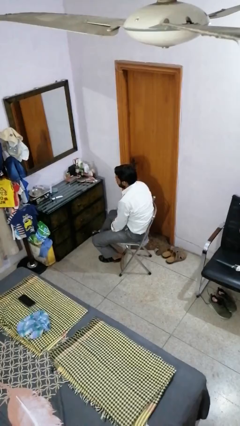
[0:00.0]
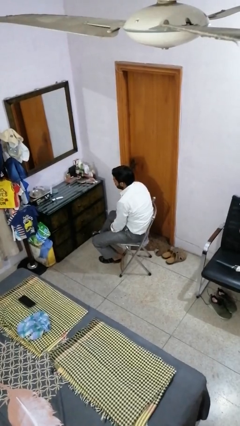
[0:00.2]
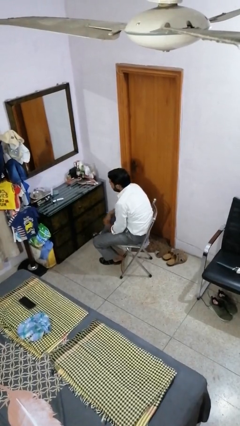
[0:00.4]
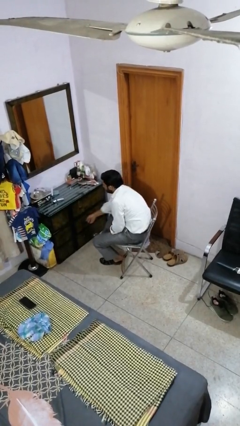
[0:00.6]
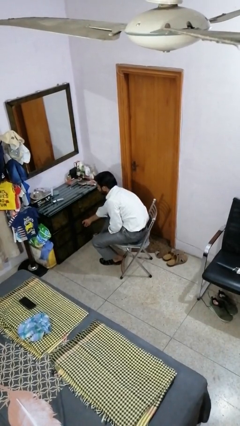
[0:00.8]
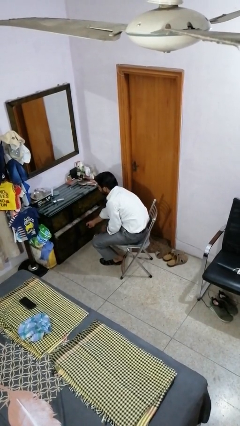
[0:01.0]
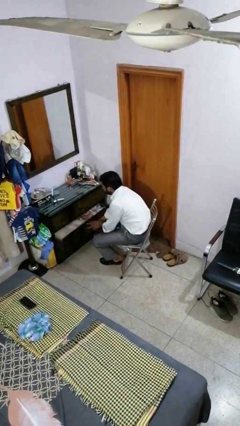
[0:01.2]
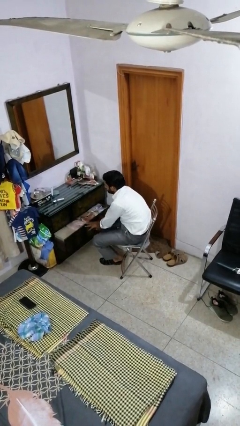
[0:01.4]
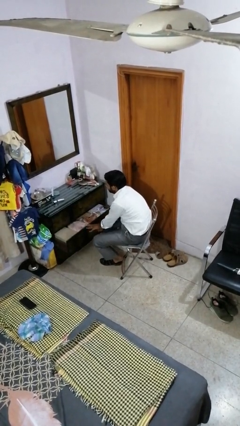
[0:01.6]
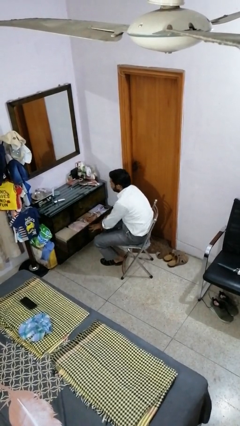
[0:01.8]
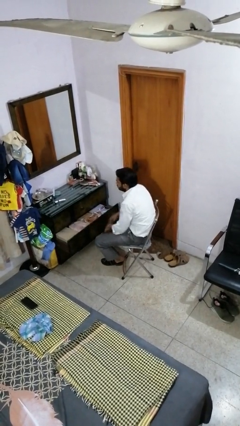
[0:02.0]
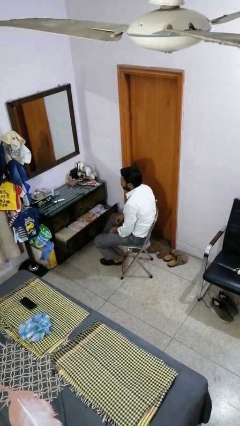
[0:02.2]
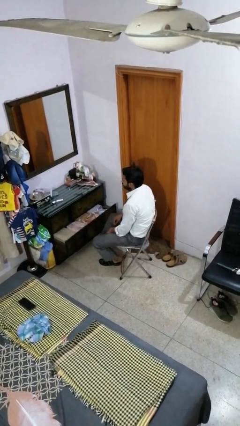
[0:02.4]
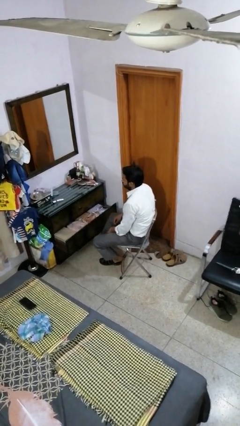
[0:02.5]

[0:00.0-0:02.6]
person opens dresser drawer

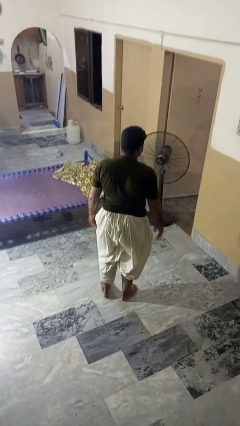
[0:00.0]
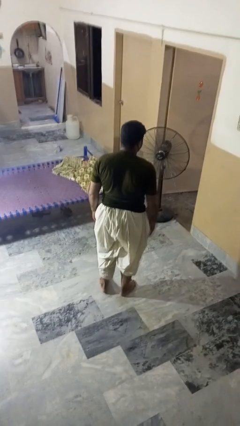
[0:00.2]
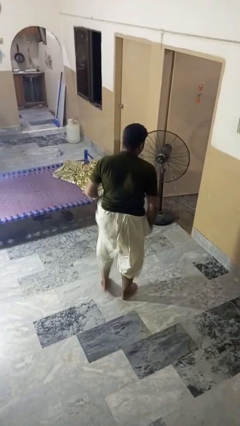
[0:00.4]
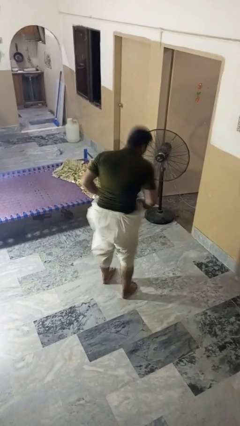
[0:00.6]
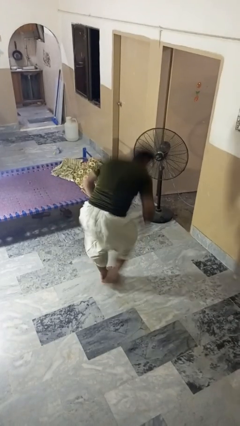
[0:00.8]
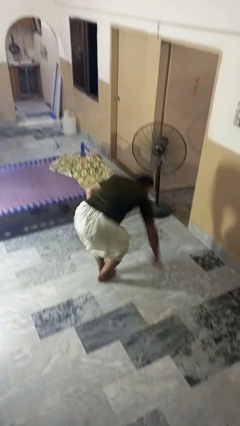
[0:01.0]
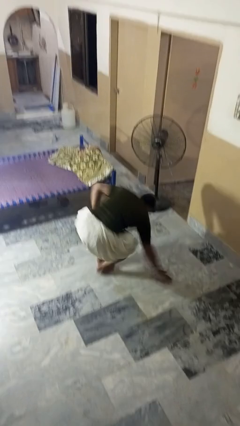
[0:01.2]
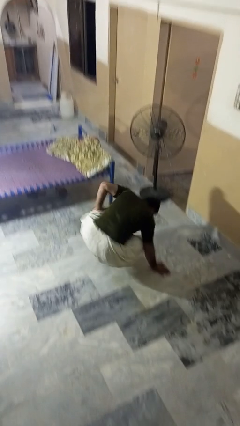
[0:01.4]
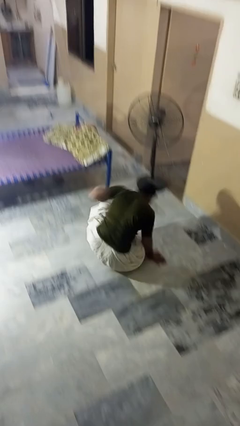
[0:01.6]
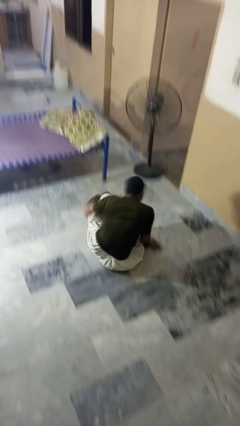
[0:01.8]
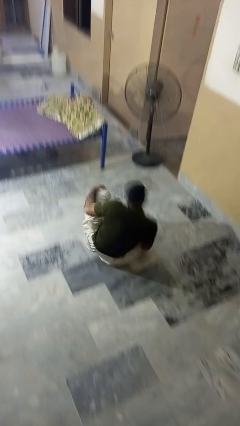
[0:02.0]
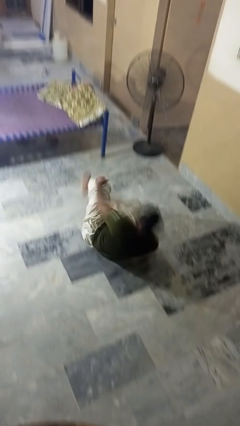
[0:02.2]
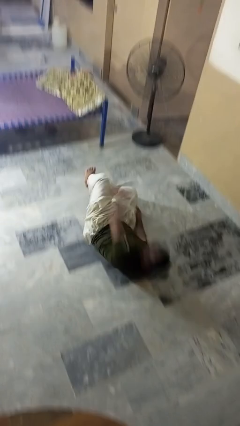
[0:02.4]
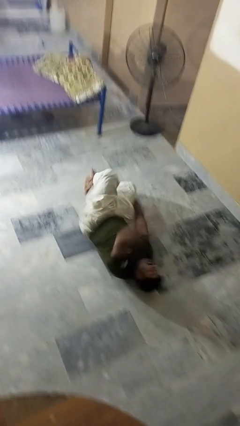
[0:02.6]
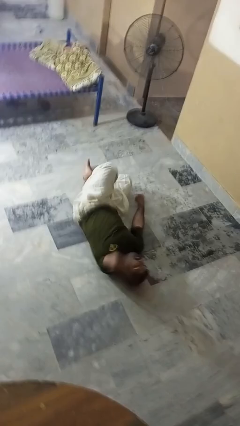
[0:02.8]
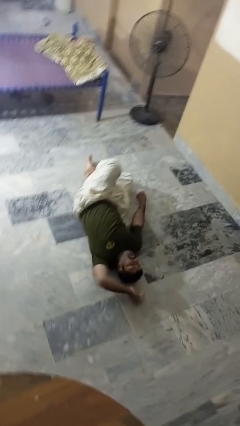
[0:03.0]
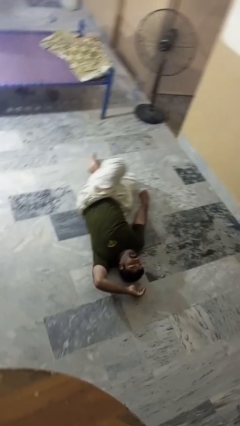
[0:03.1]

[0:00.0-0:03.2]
person falls while standing

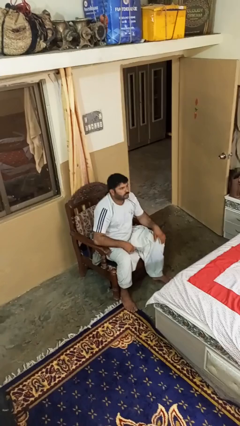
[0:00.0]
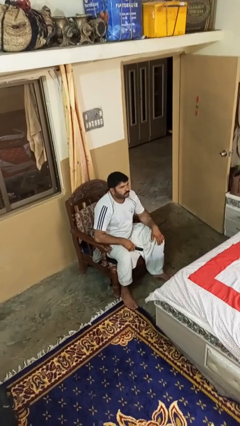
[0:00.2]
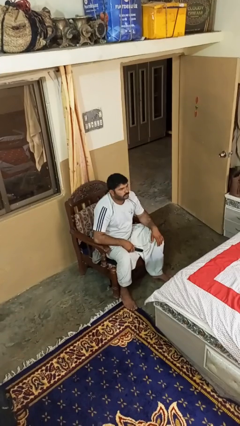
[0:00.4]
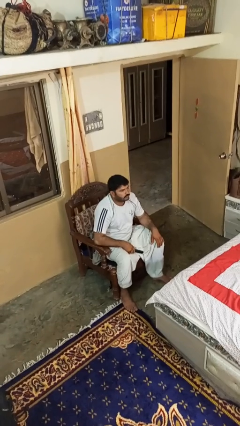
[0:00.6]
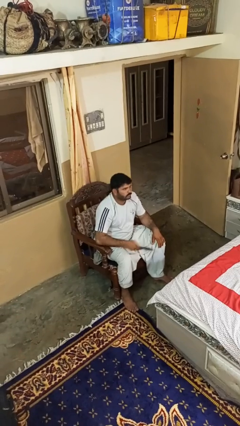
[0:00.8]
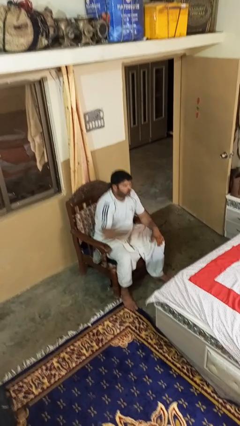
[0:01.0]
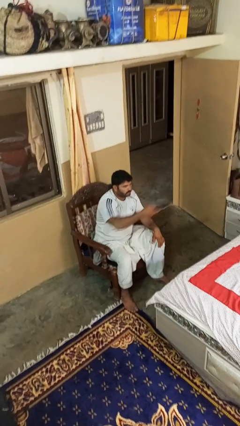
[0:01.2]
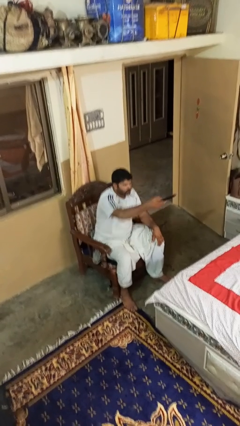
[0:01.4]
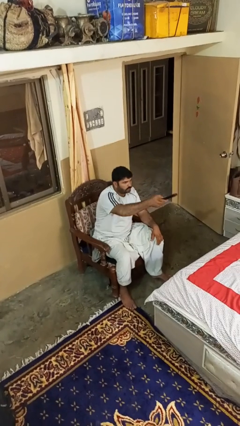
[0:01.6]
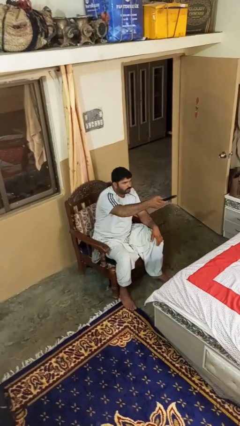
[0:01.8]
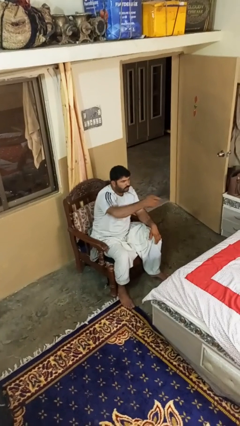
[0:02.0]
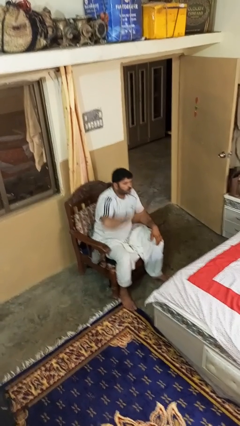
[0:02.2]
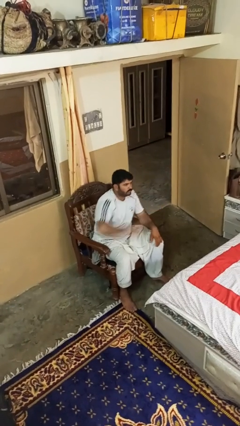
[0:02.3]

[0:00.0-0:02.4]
person uses television remote

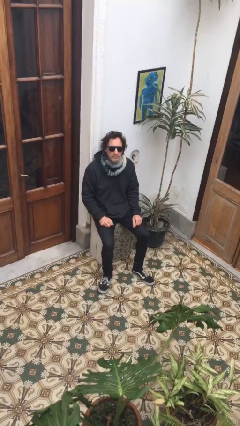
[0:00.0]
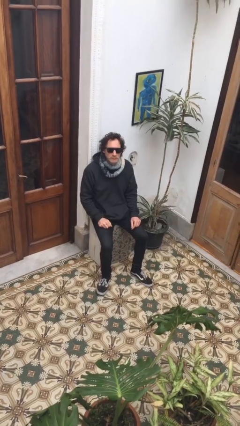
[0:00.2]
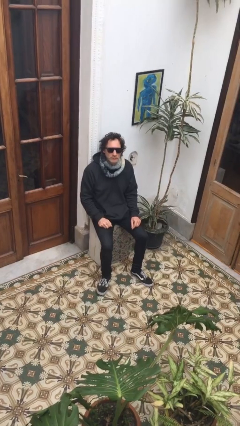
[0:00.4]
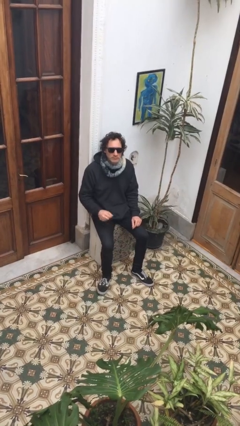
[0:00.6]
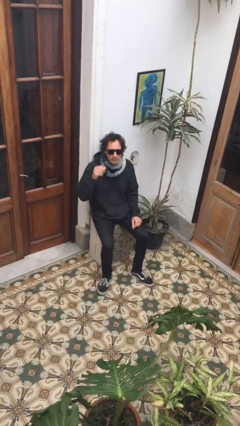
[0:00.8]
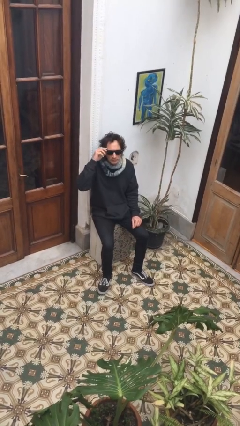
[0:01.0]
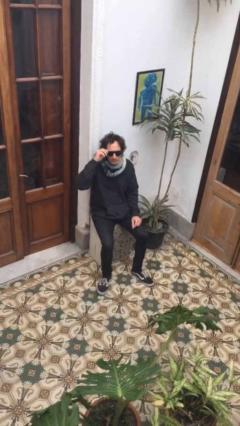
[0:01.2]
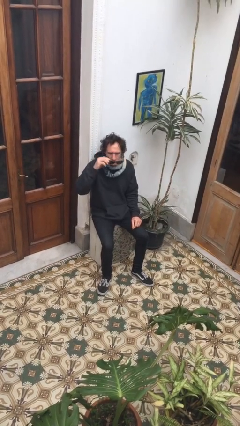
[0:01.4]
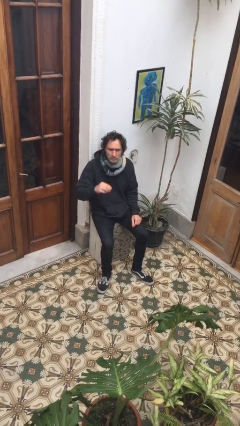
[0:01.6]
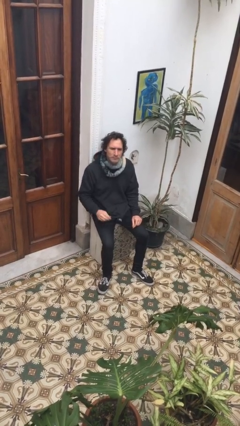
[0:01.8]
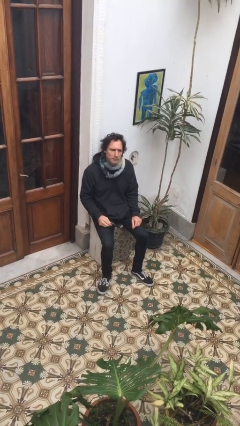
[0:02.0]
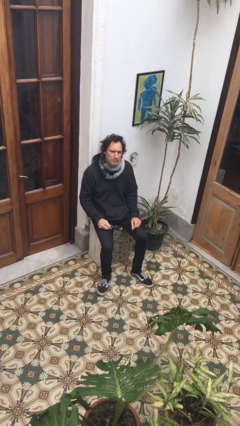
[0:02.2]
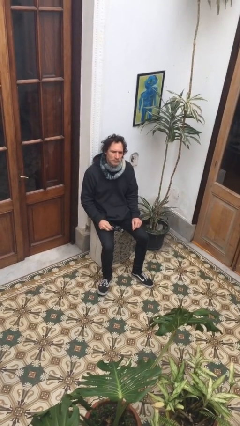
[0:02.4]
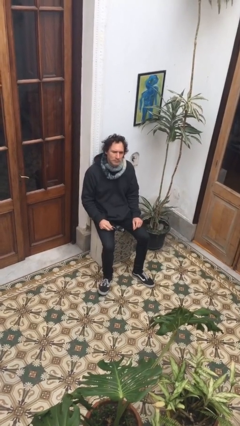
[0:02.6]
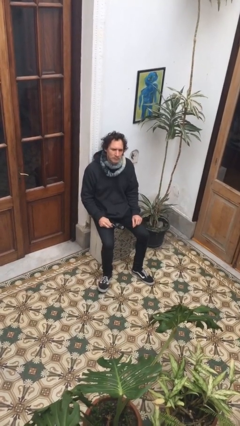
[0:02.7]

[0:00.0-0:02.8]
person takes off sunglasses

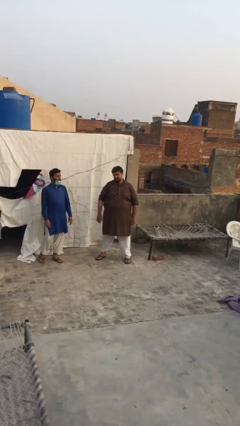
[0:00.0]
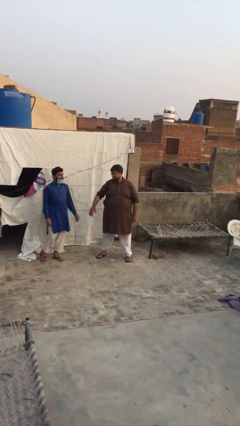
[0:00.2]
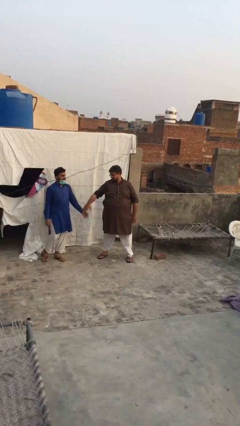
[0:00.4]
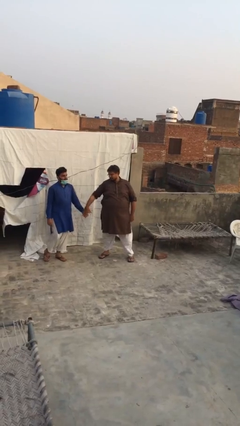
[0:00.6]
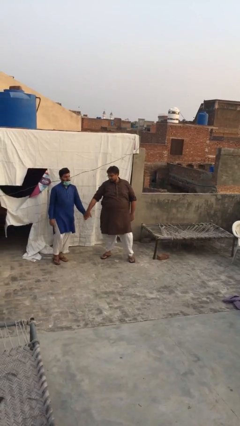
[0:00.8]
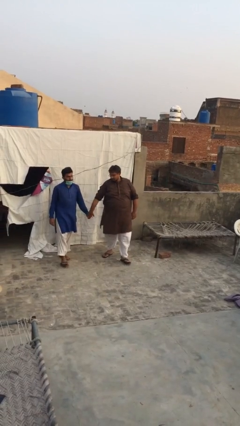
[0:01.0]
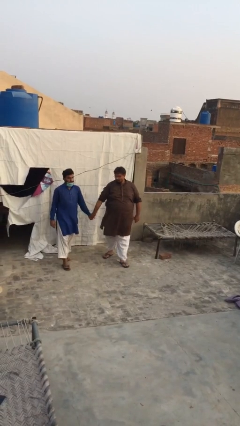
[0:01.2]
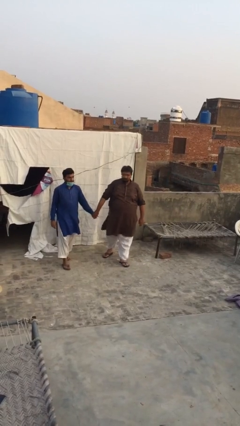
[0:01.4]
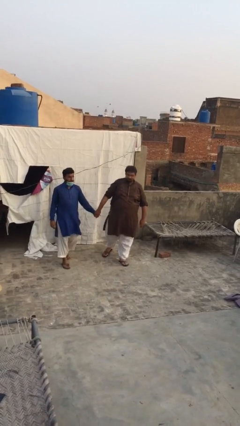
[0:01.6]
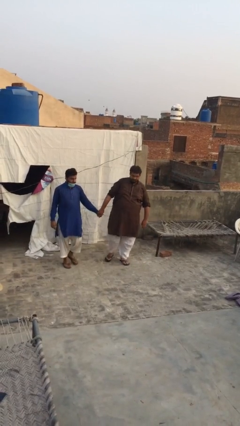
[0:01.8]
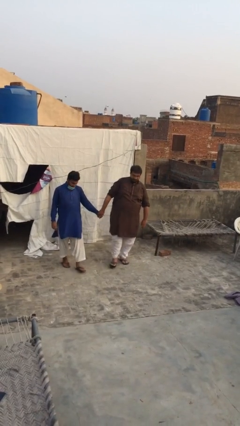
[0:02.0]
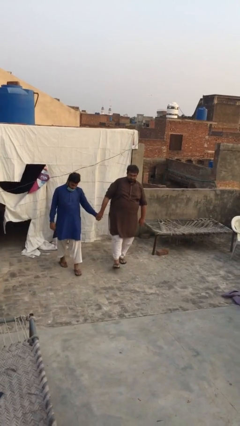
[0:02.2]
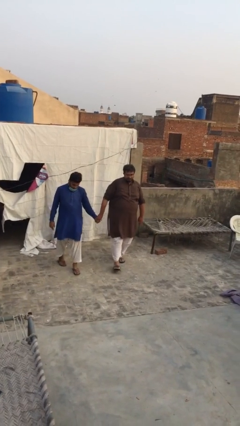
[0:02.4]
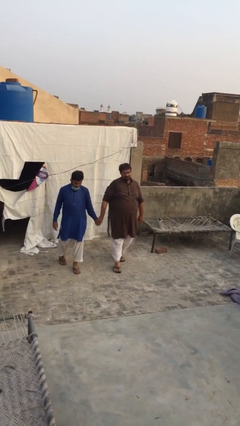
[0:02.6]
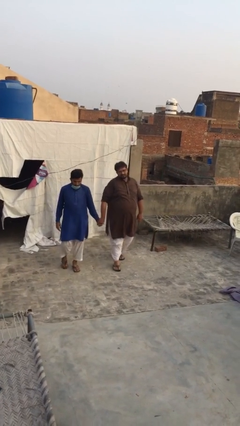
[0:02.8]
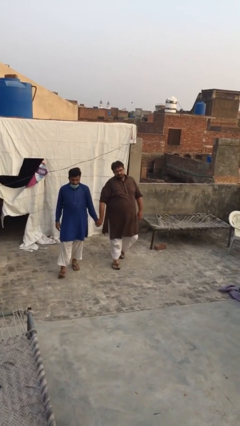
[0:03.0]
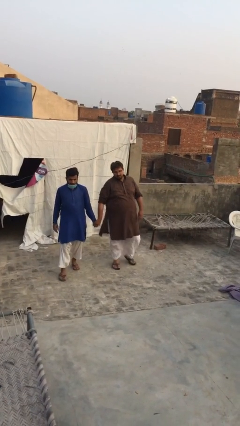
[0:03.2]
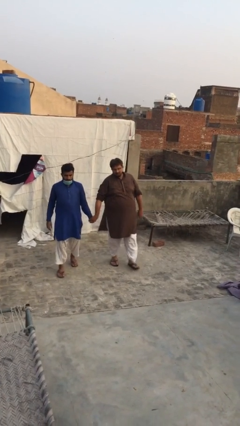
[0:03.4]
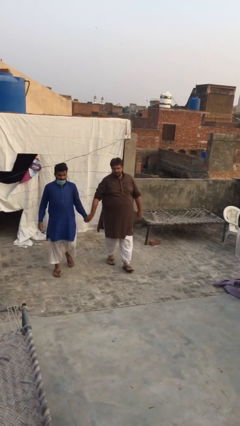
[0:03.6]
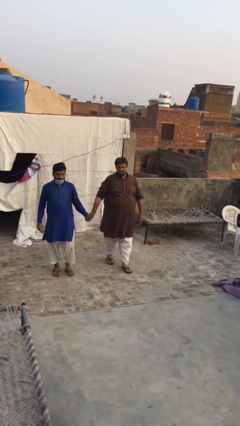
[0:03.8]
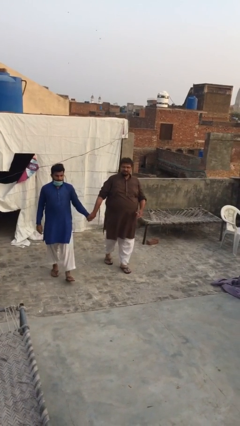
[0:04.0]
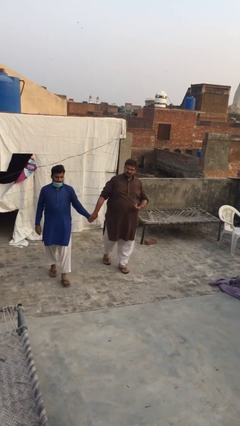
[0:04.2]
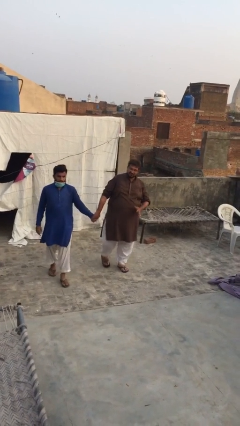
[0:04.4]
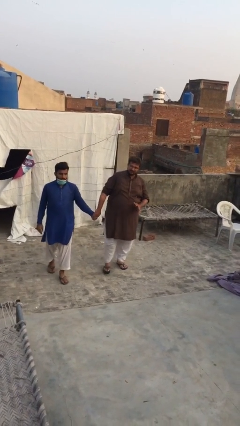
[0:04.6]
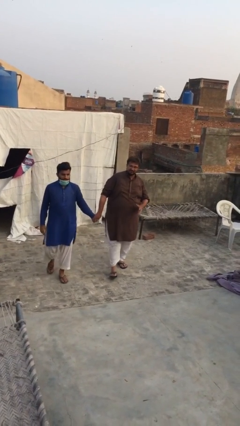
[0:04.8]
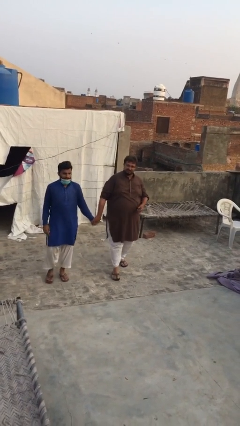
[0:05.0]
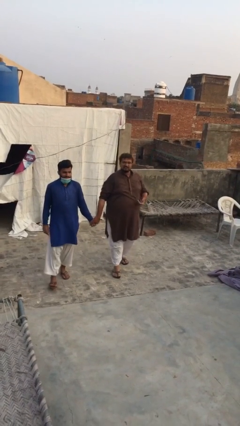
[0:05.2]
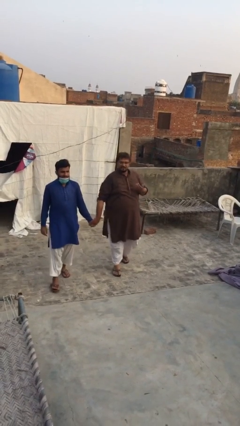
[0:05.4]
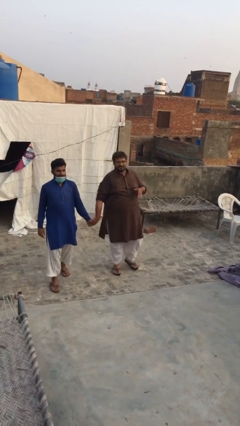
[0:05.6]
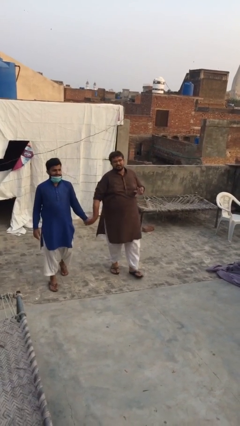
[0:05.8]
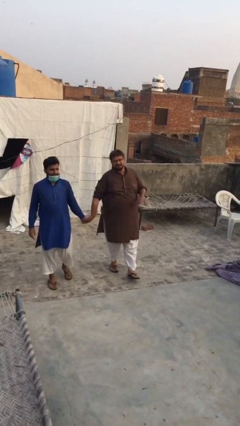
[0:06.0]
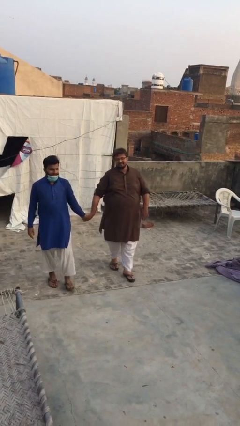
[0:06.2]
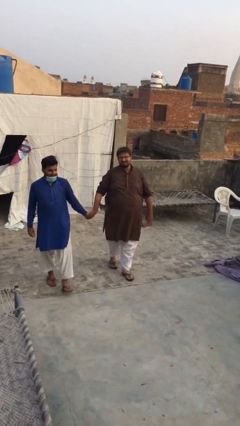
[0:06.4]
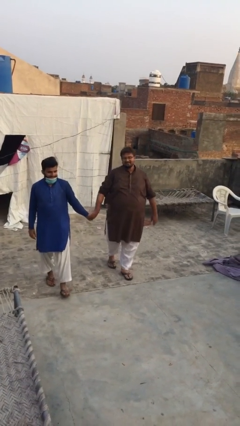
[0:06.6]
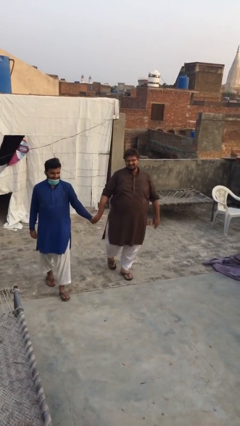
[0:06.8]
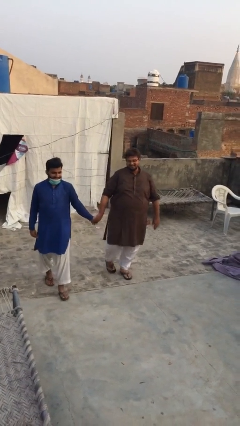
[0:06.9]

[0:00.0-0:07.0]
person holds hand
